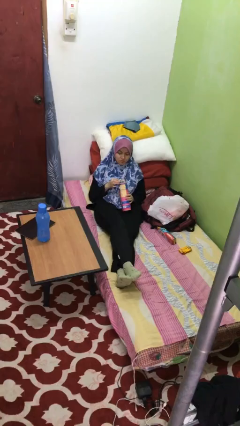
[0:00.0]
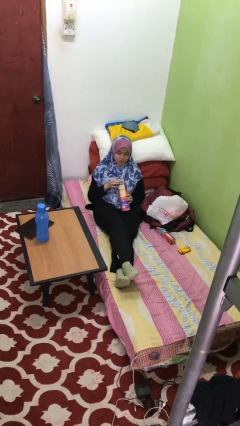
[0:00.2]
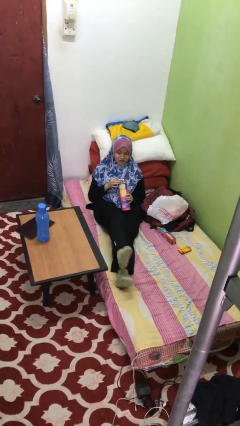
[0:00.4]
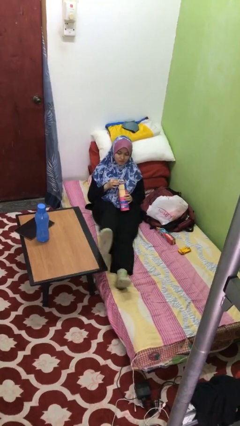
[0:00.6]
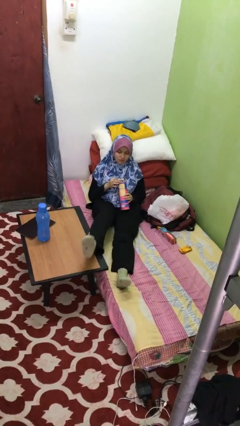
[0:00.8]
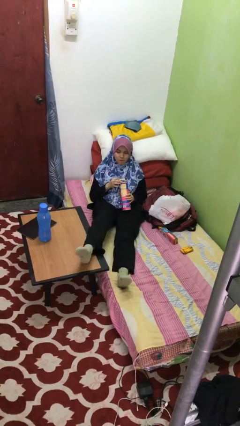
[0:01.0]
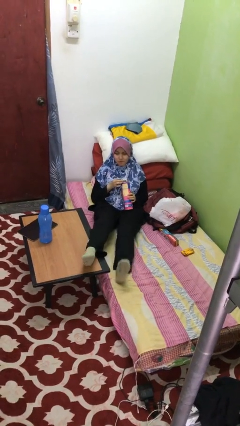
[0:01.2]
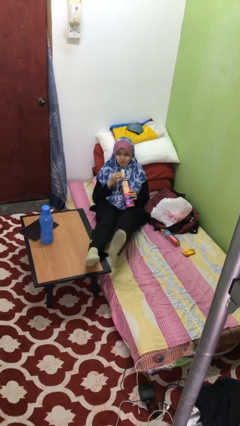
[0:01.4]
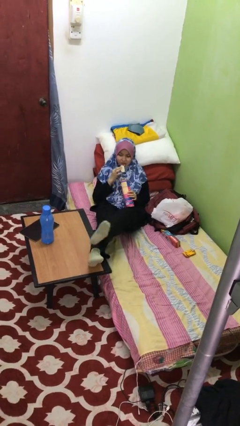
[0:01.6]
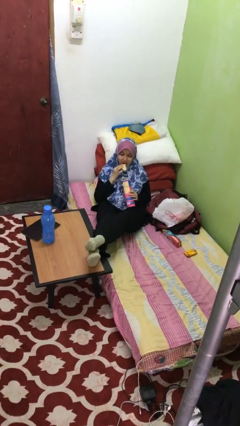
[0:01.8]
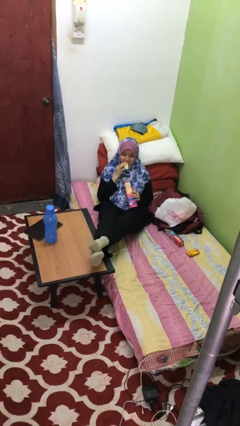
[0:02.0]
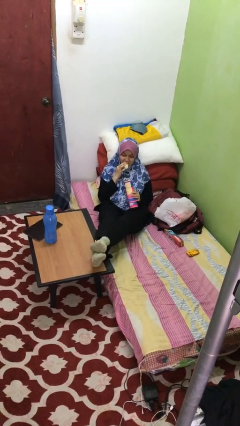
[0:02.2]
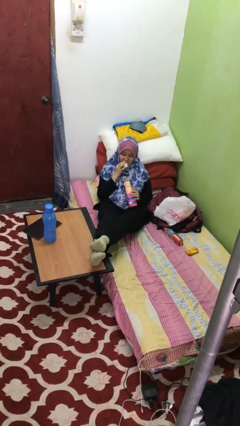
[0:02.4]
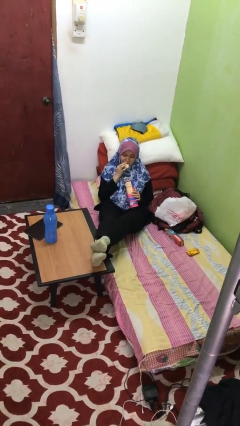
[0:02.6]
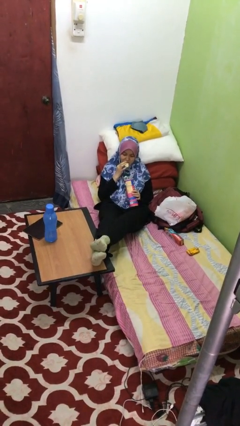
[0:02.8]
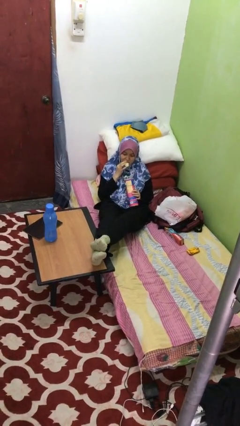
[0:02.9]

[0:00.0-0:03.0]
person puts feet up

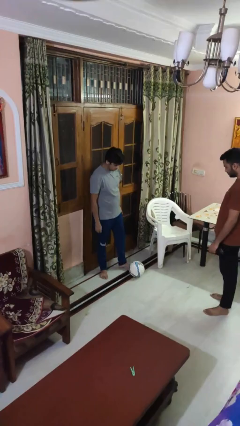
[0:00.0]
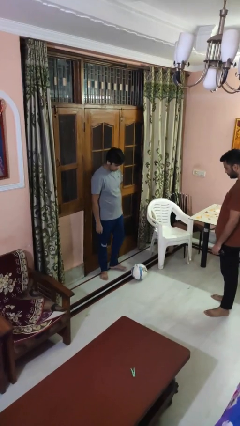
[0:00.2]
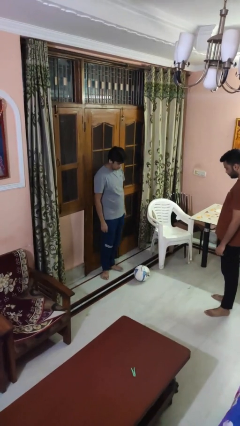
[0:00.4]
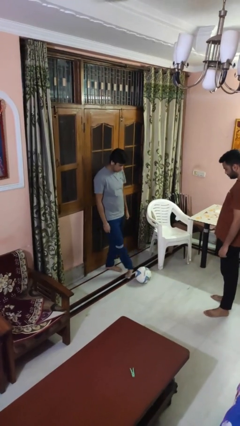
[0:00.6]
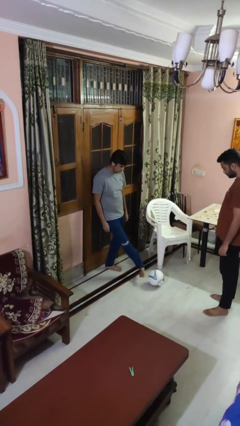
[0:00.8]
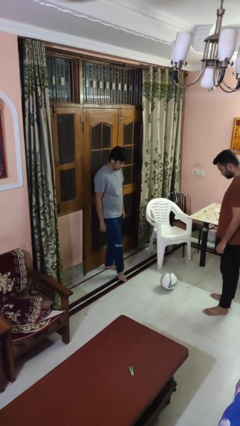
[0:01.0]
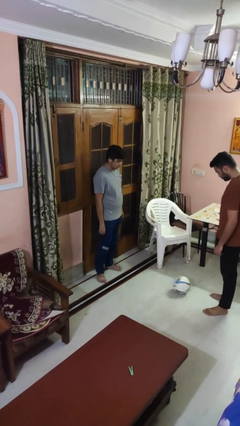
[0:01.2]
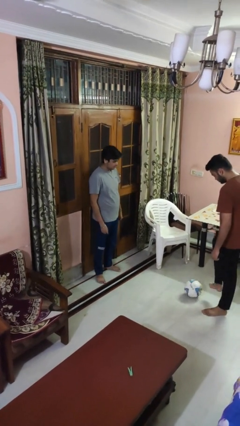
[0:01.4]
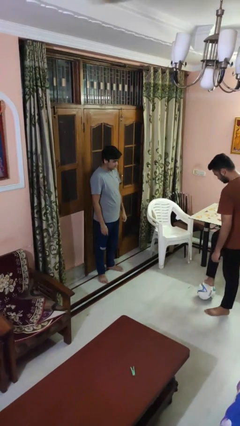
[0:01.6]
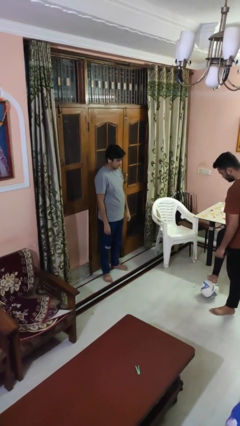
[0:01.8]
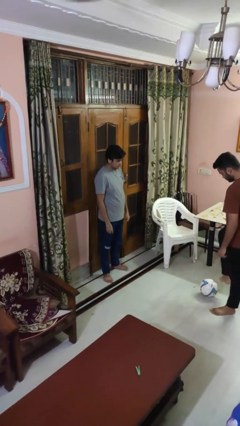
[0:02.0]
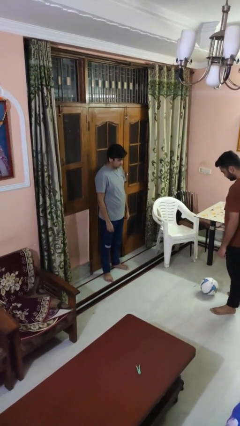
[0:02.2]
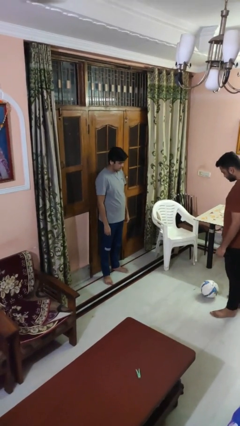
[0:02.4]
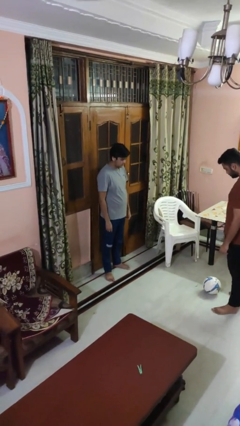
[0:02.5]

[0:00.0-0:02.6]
person kicks object to person

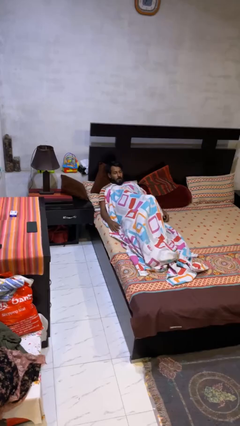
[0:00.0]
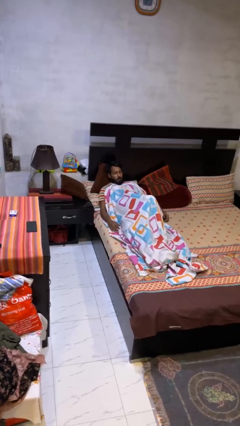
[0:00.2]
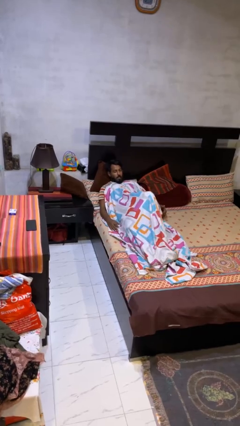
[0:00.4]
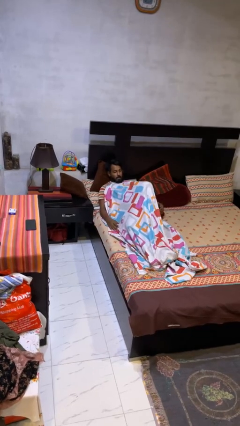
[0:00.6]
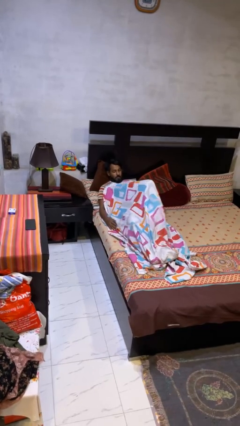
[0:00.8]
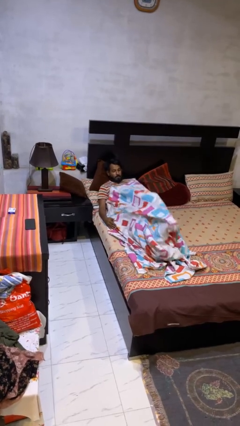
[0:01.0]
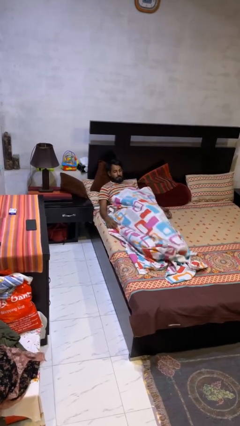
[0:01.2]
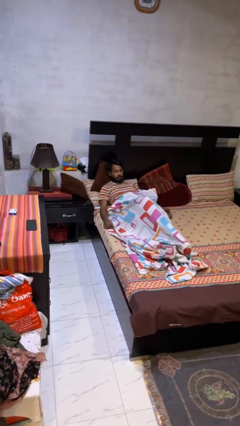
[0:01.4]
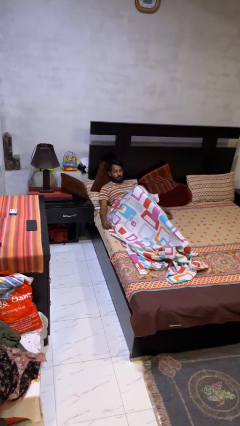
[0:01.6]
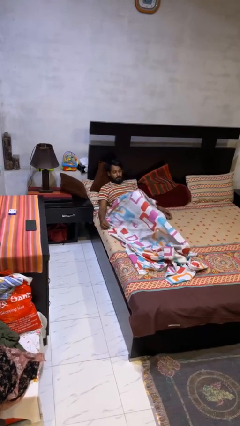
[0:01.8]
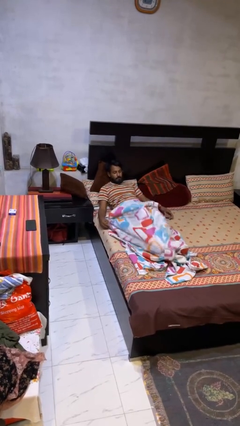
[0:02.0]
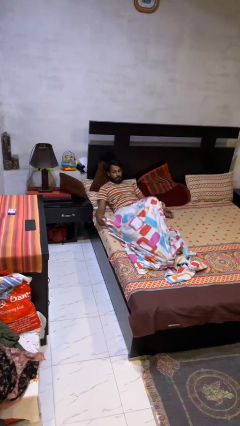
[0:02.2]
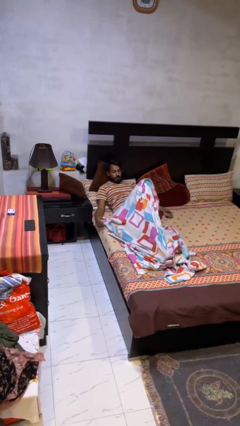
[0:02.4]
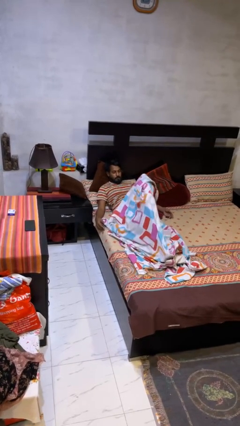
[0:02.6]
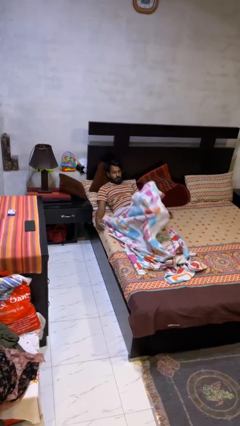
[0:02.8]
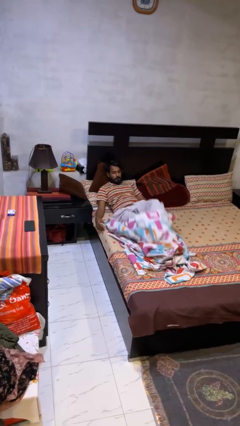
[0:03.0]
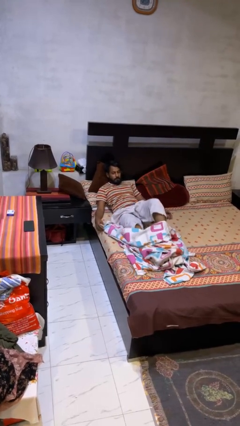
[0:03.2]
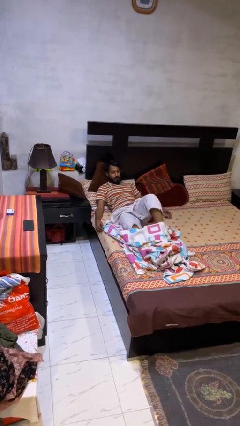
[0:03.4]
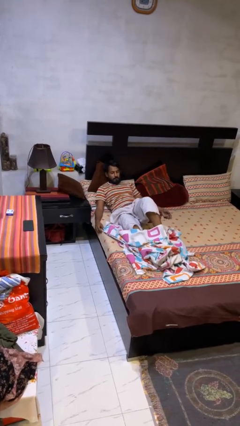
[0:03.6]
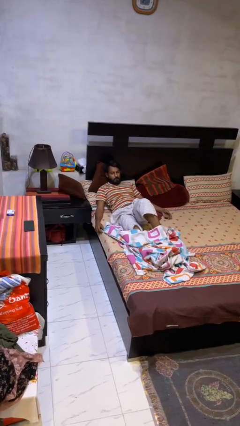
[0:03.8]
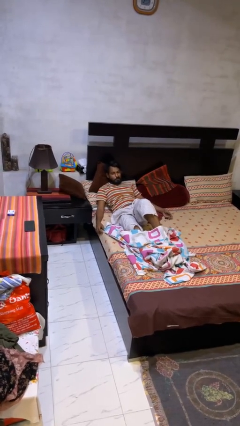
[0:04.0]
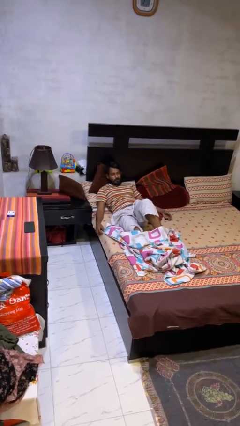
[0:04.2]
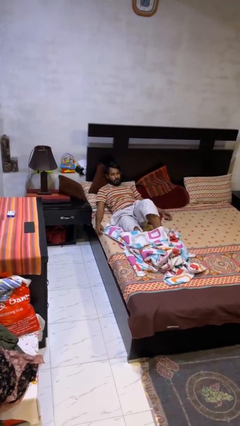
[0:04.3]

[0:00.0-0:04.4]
person uncovers with bedsheets

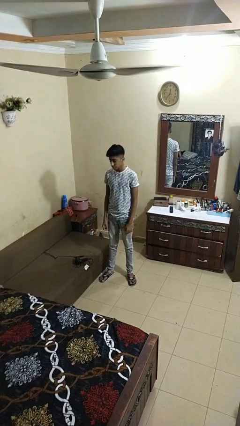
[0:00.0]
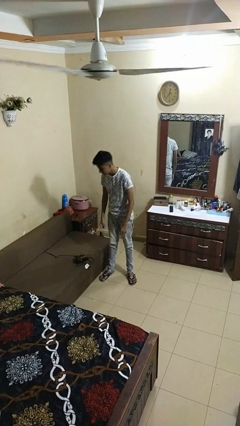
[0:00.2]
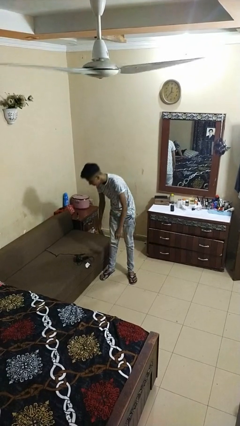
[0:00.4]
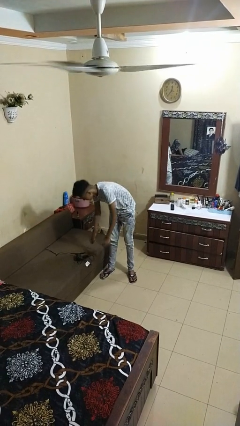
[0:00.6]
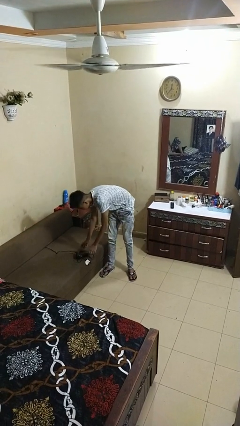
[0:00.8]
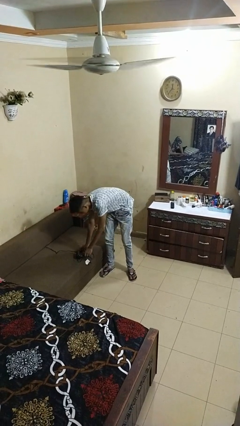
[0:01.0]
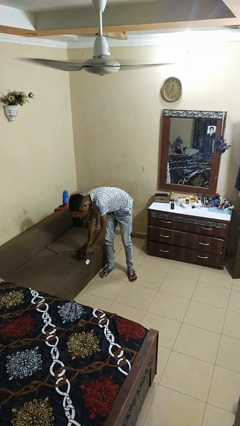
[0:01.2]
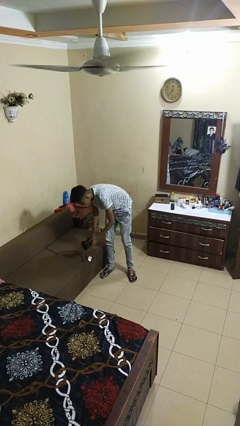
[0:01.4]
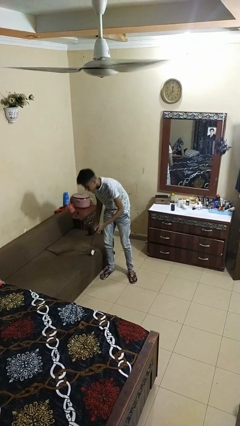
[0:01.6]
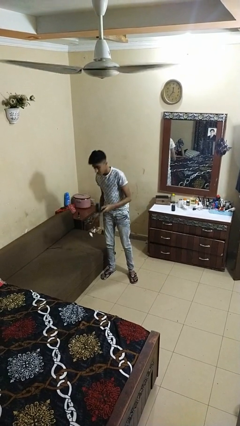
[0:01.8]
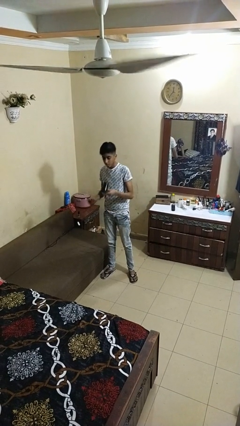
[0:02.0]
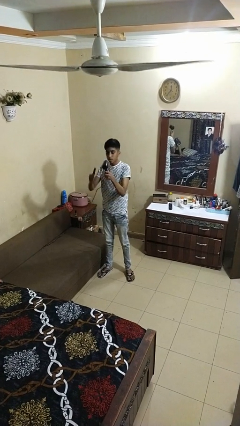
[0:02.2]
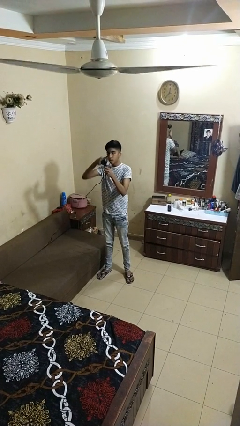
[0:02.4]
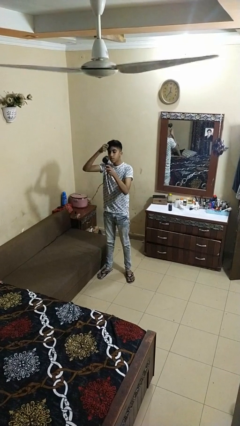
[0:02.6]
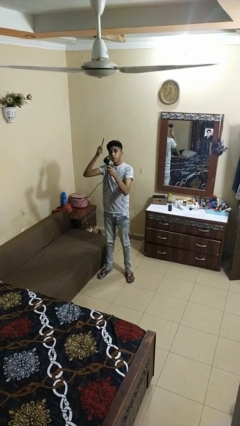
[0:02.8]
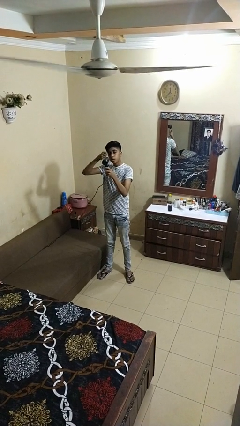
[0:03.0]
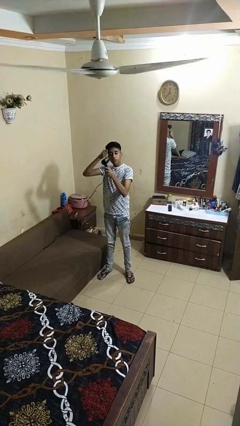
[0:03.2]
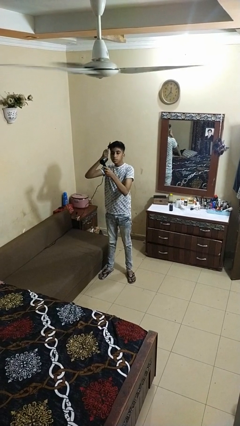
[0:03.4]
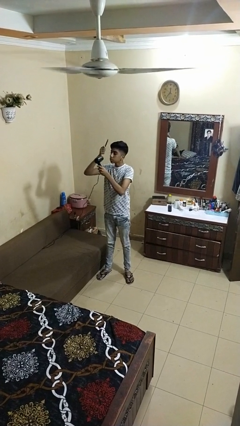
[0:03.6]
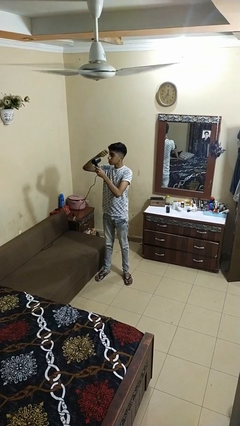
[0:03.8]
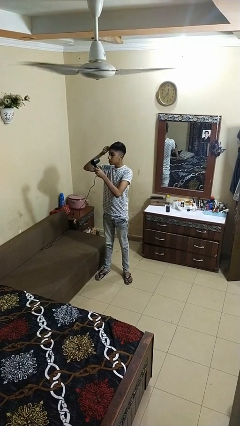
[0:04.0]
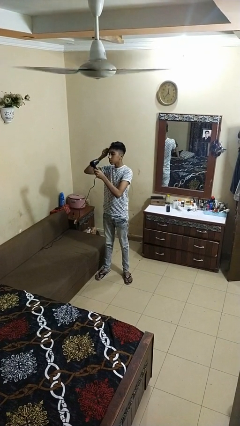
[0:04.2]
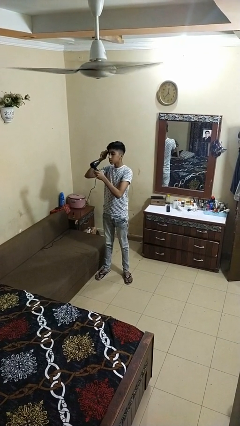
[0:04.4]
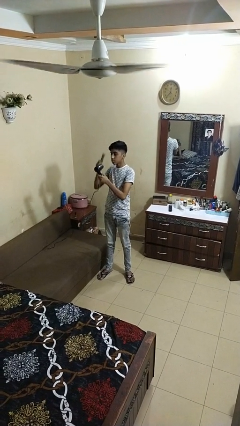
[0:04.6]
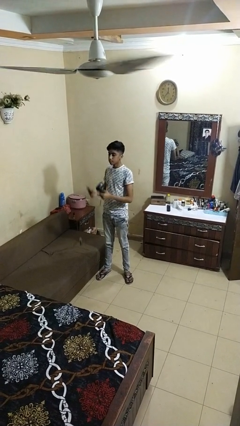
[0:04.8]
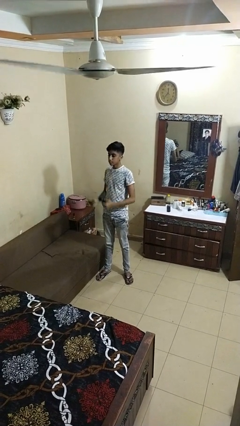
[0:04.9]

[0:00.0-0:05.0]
person dries hair with hairdryer

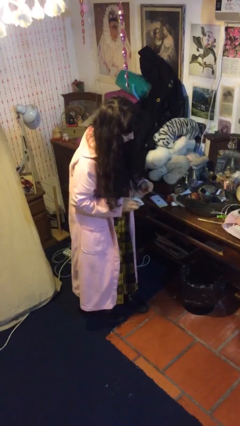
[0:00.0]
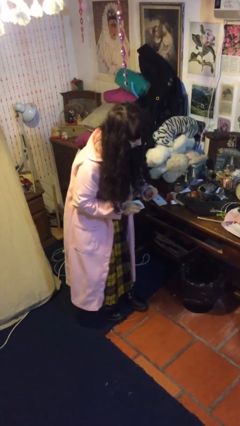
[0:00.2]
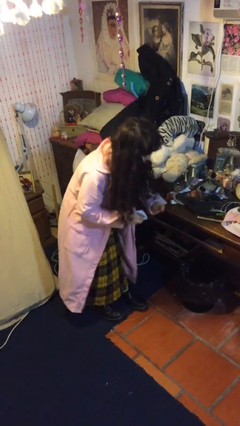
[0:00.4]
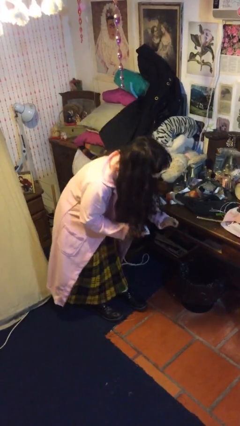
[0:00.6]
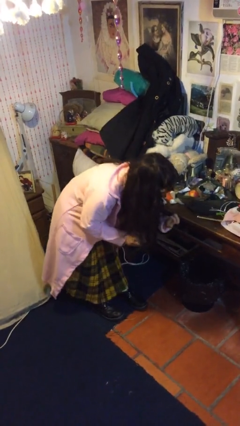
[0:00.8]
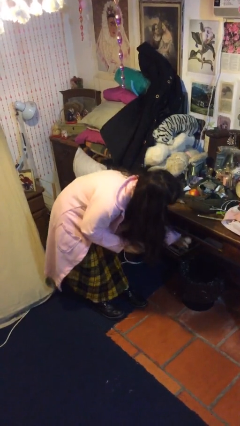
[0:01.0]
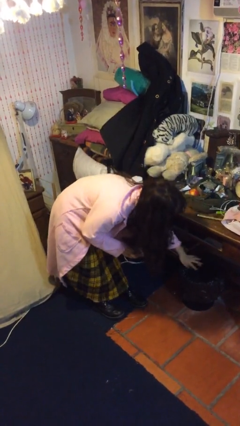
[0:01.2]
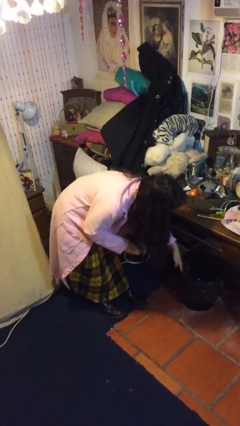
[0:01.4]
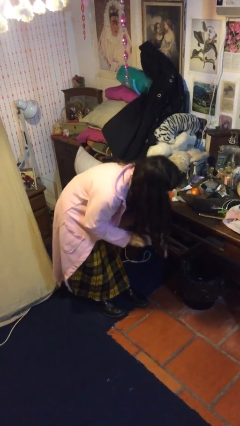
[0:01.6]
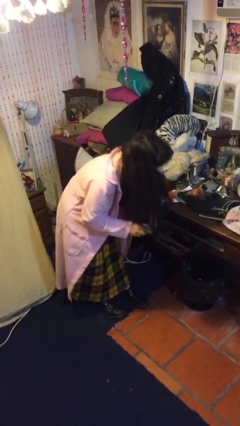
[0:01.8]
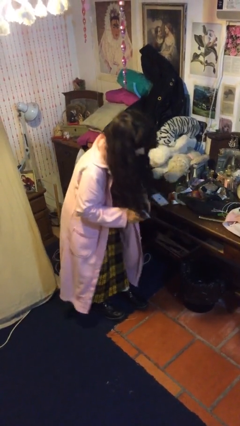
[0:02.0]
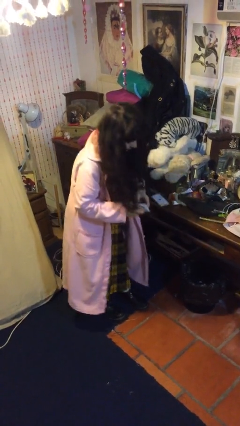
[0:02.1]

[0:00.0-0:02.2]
person discards trash

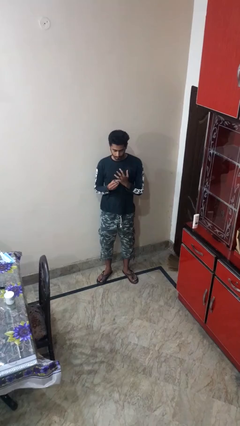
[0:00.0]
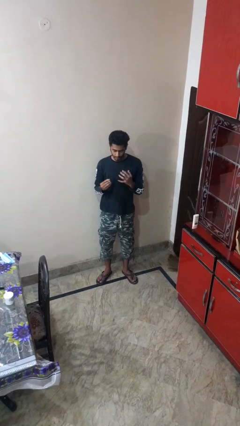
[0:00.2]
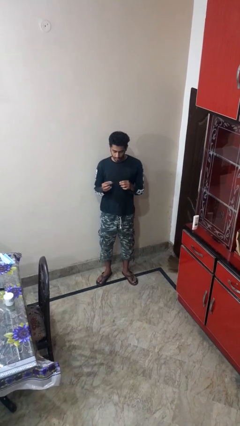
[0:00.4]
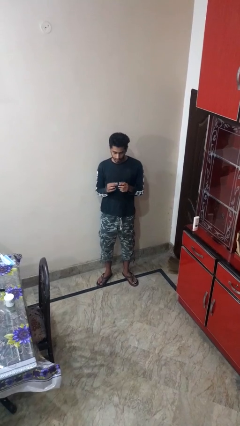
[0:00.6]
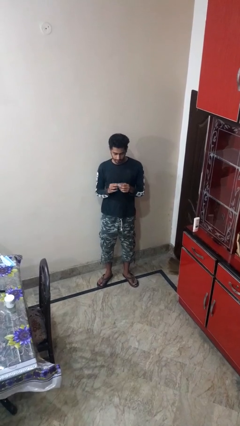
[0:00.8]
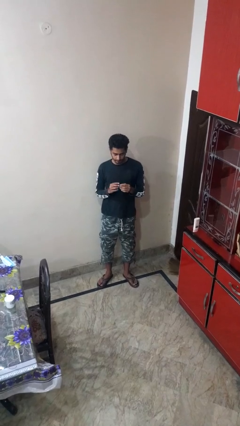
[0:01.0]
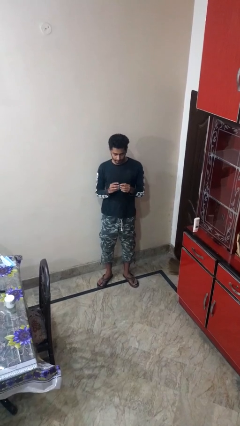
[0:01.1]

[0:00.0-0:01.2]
person takes off ring
